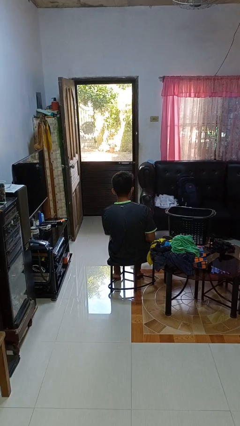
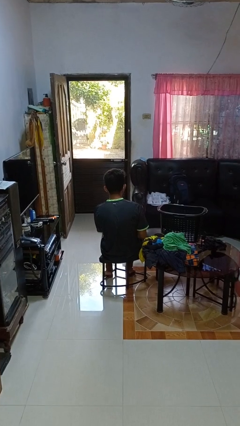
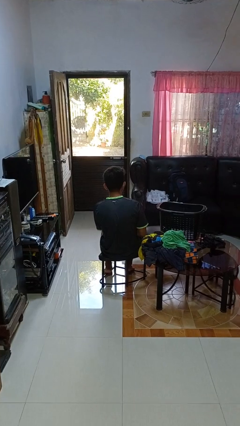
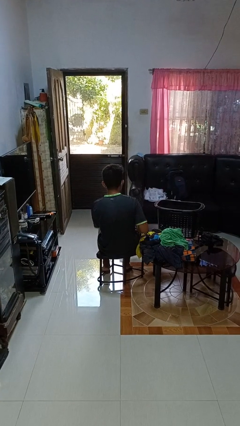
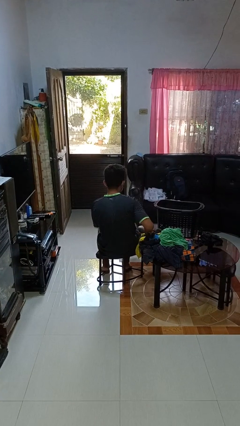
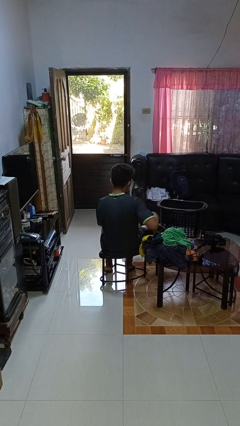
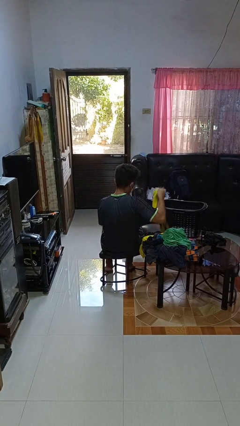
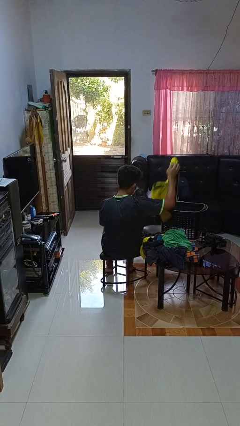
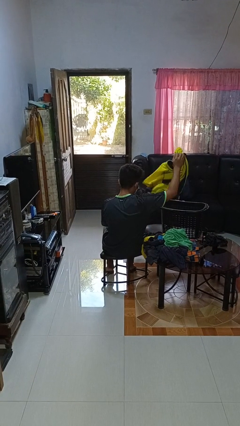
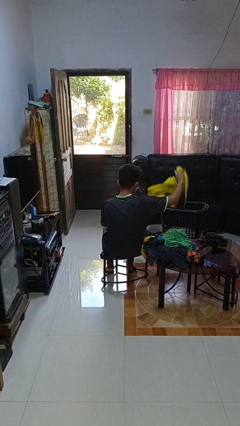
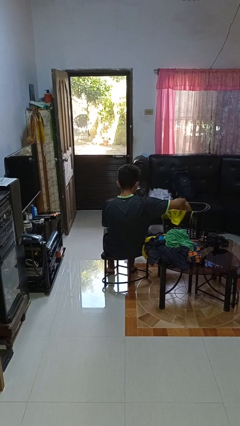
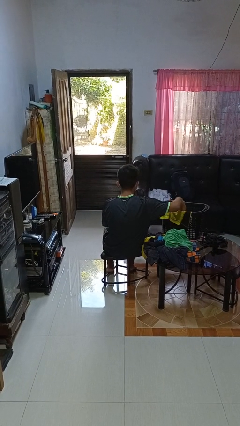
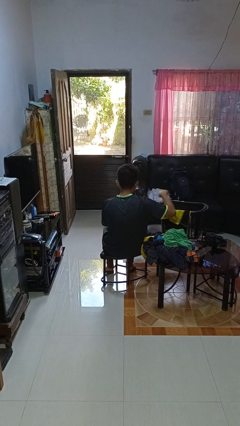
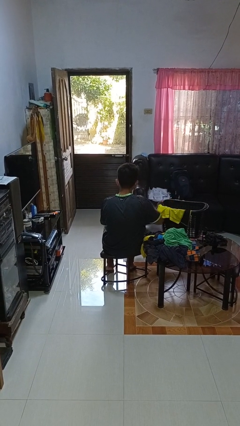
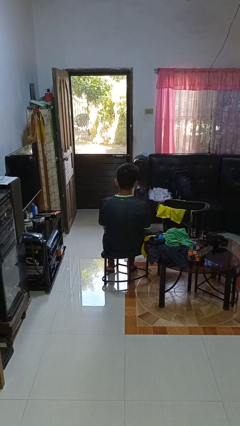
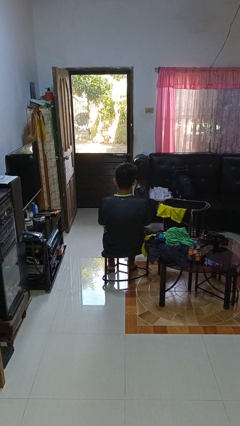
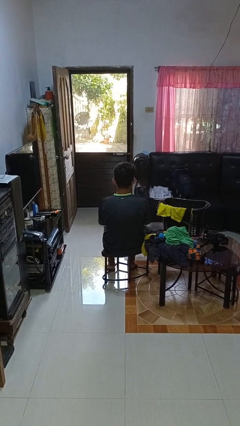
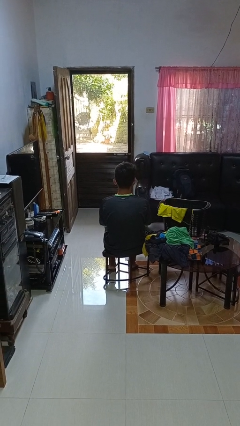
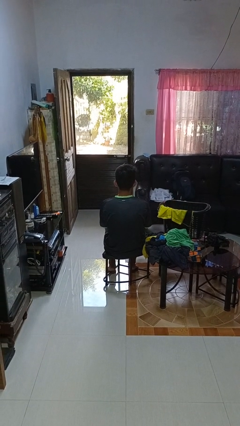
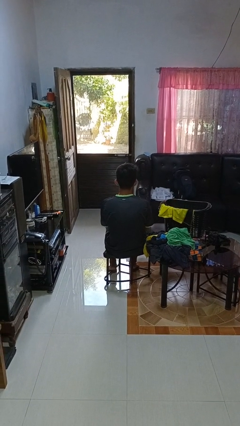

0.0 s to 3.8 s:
person puts object into basket

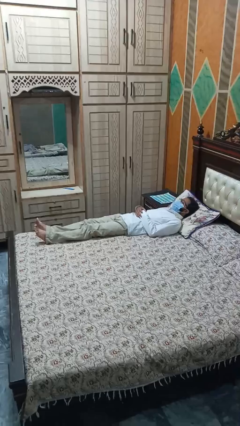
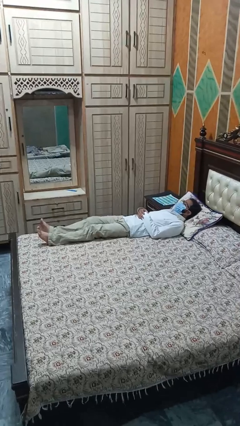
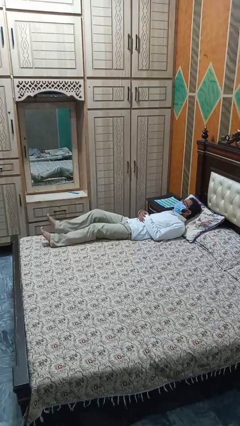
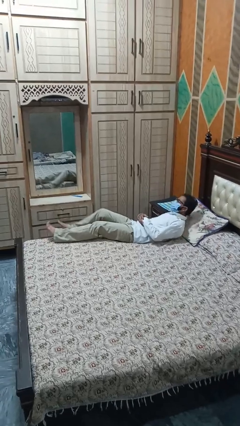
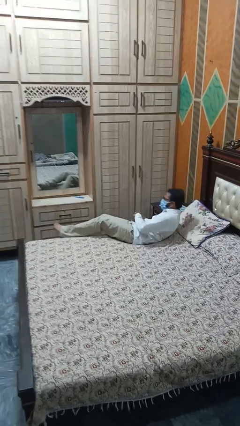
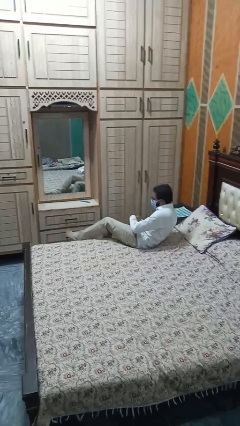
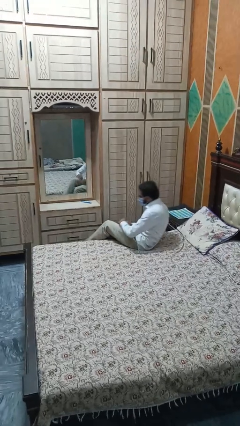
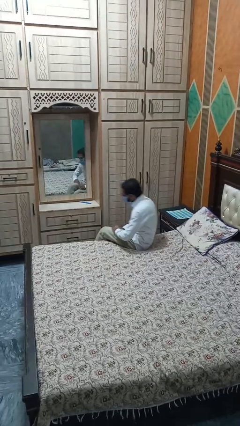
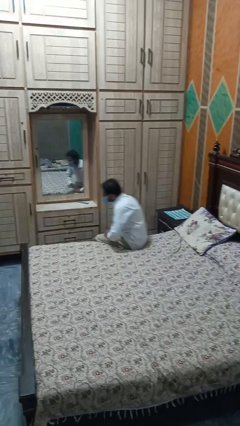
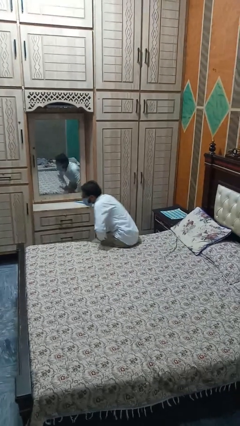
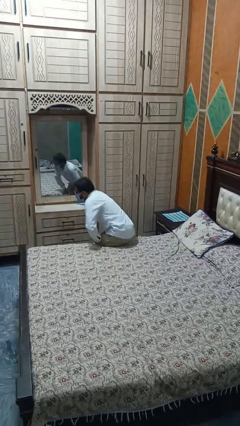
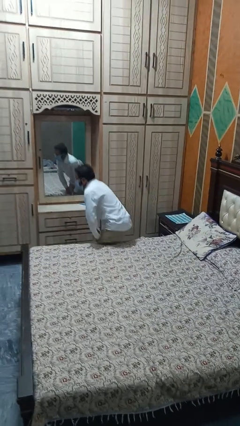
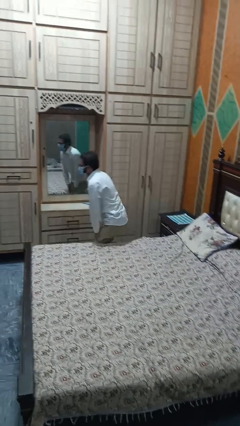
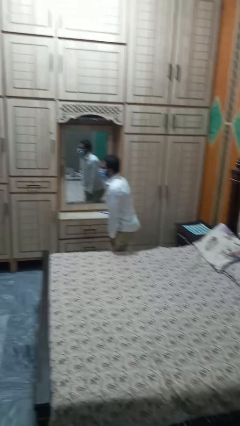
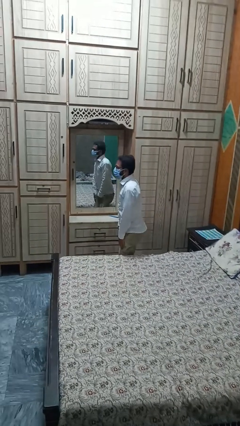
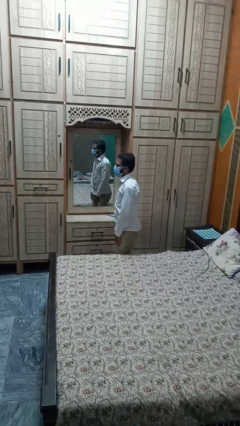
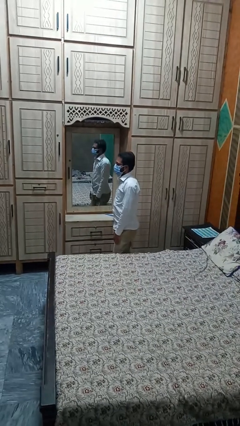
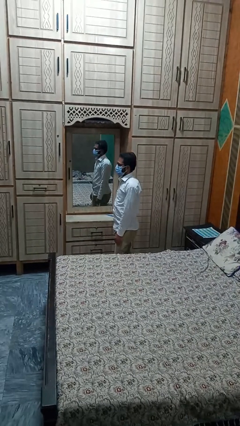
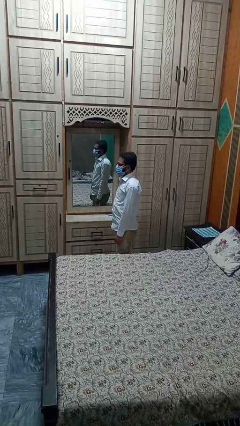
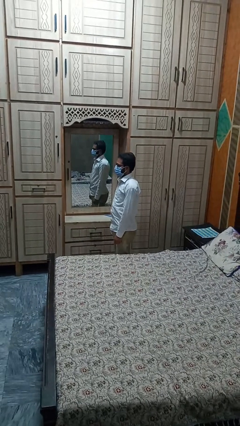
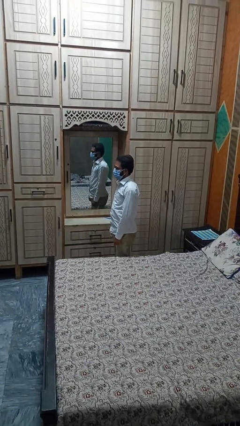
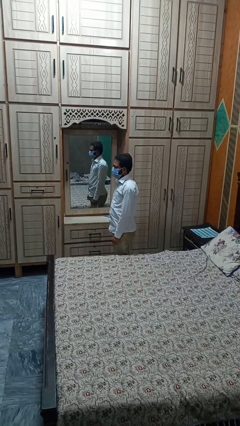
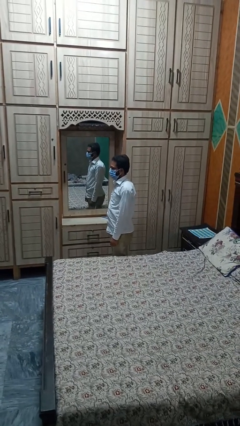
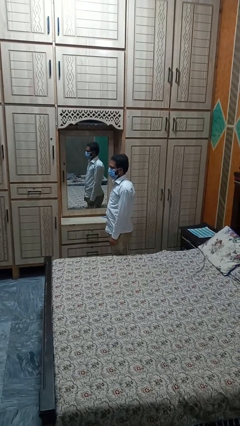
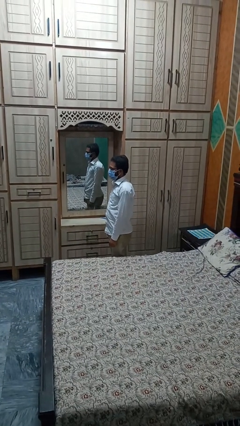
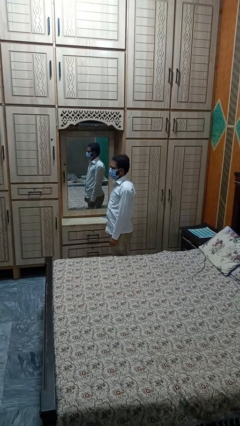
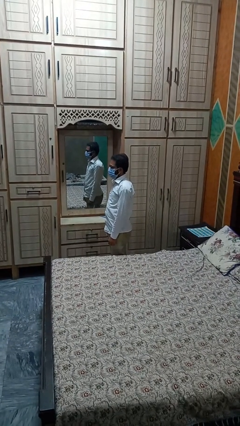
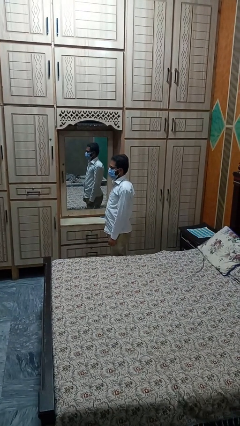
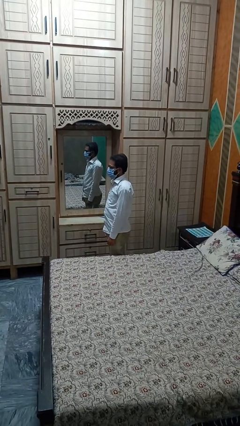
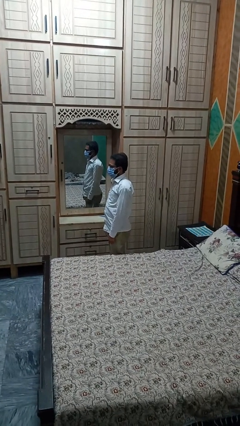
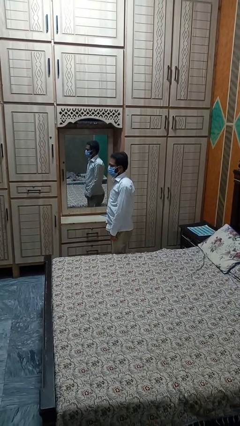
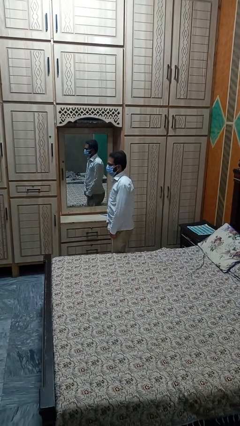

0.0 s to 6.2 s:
person stands up

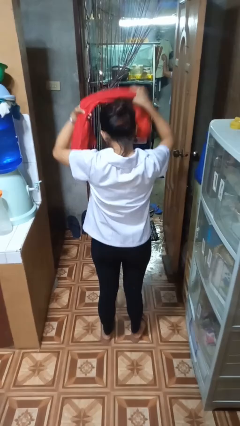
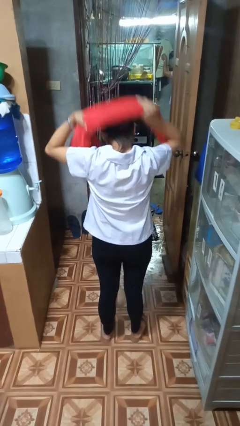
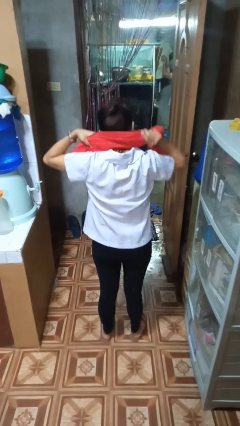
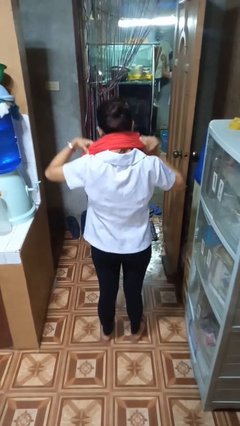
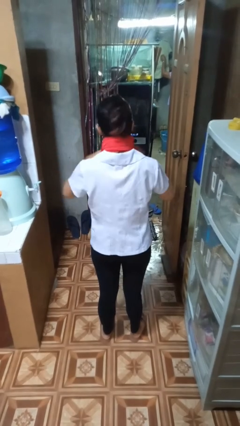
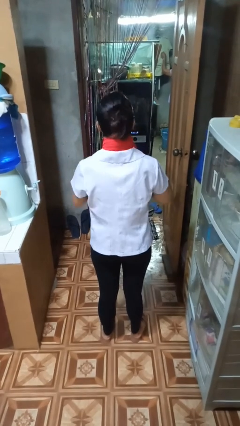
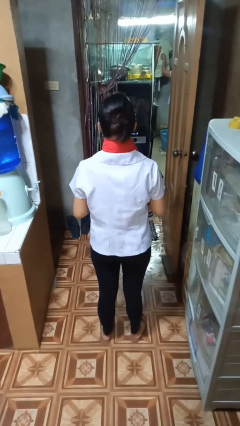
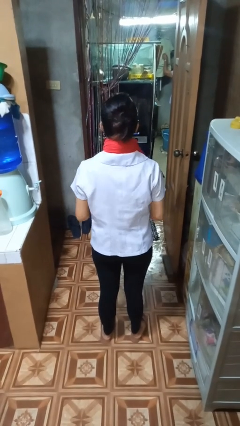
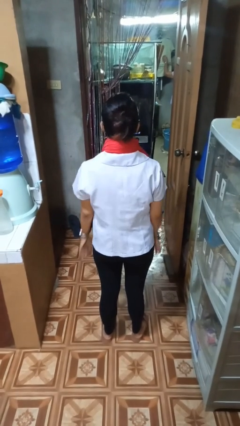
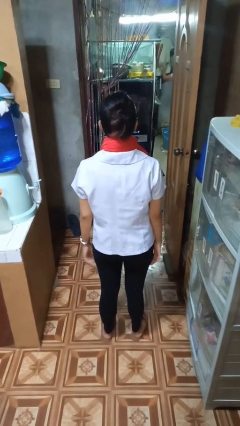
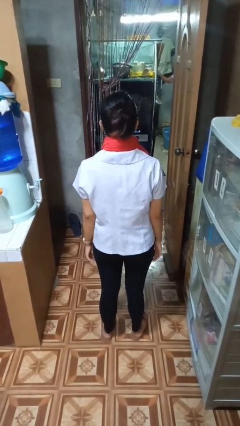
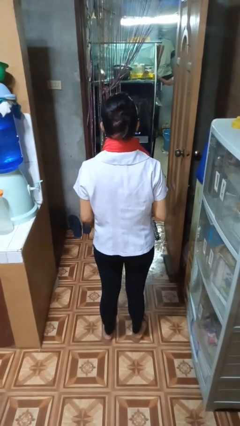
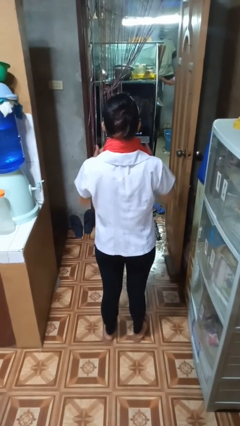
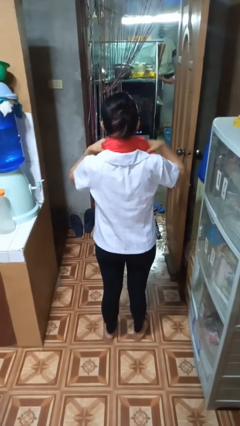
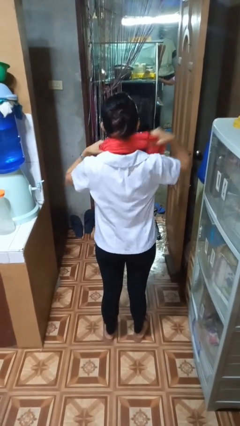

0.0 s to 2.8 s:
person puts on scarf

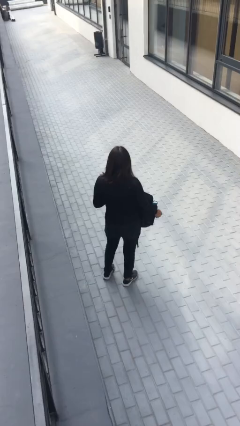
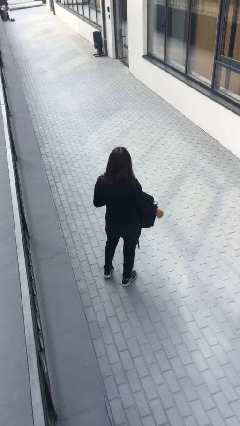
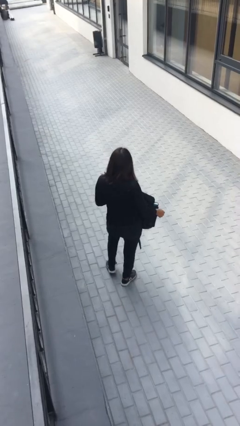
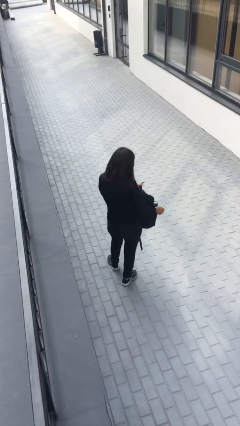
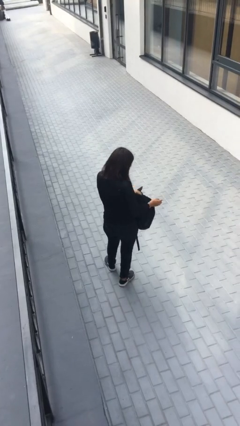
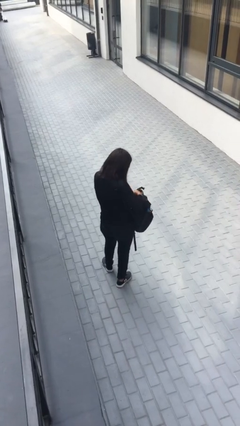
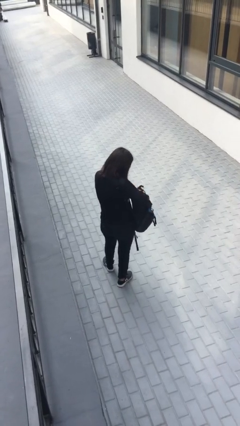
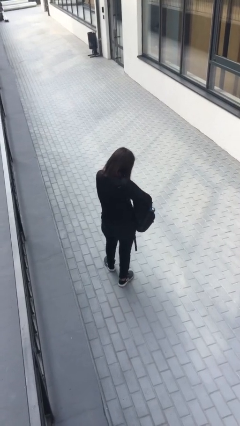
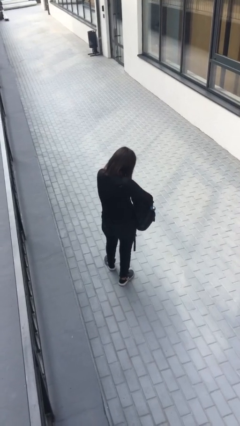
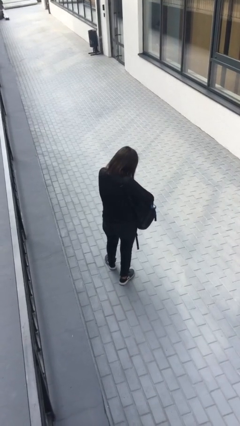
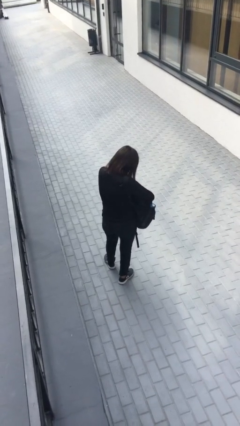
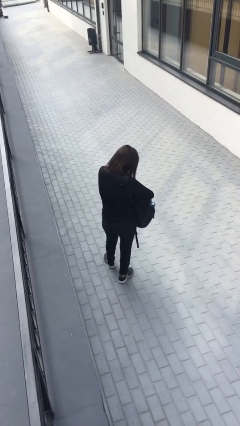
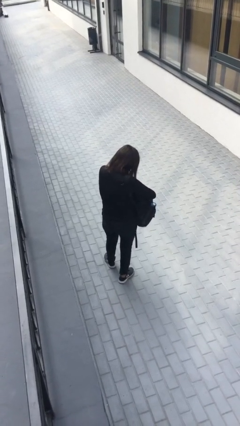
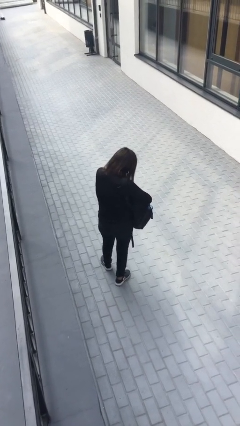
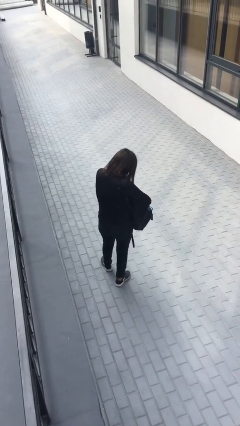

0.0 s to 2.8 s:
person searches in backpack

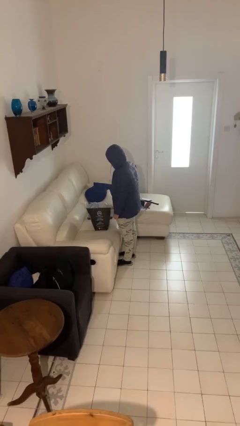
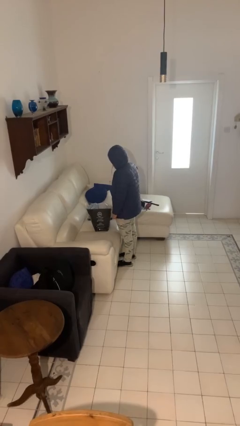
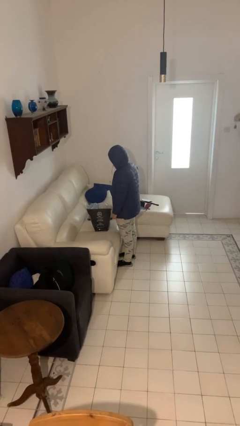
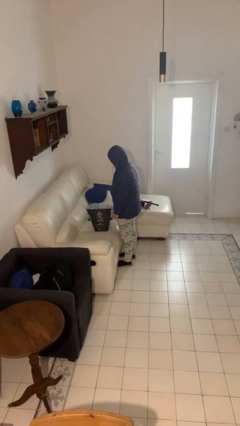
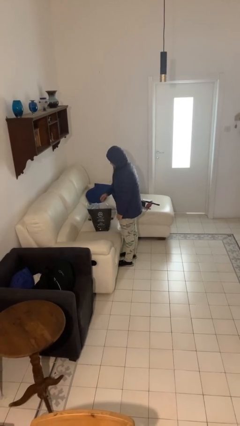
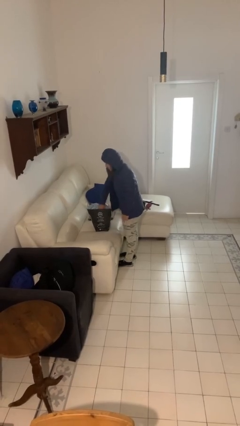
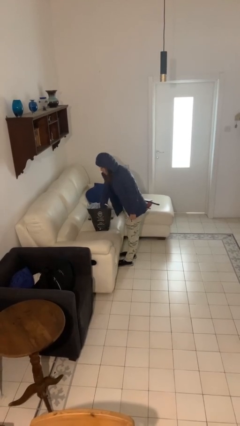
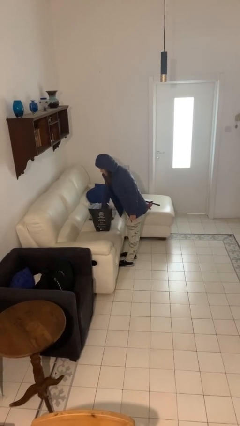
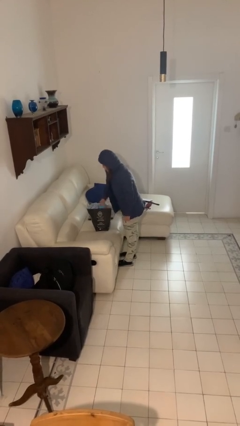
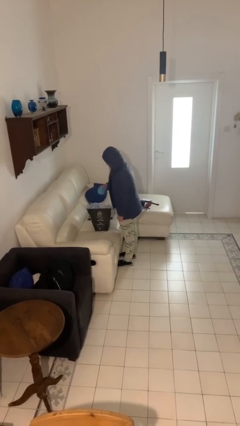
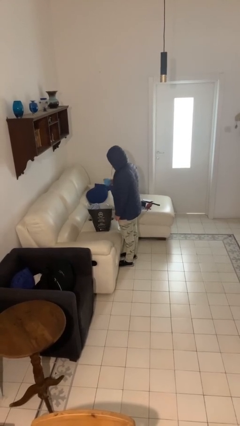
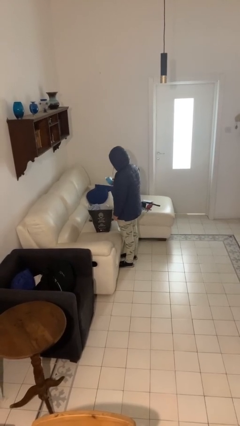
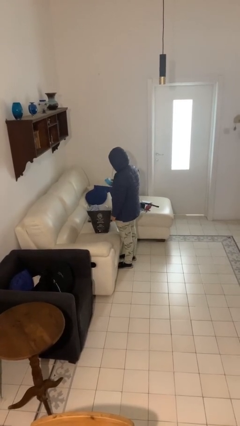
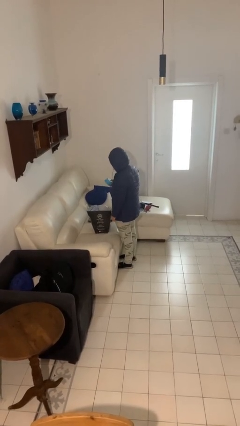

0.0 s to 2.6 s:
person takes object from bag
